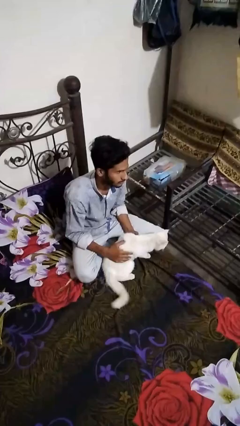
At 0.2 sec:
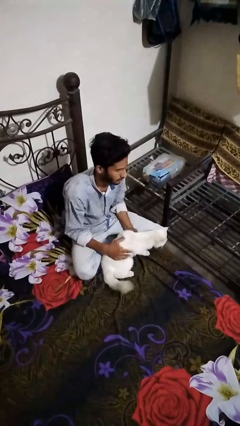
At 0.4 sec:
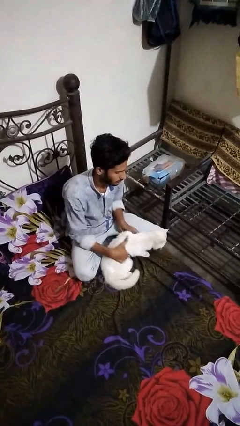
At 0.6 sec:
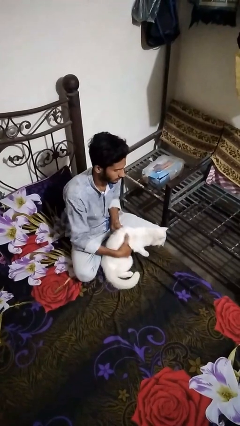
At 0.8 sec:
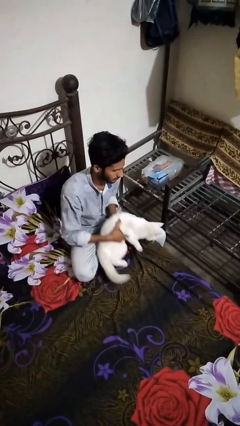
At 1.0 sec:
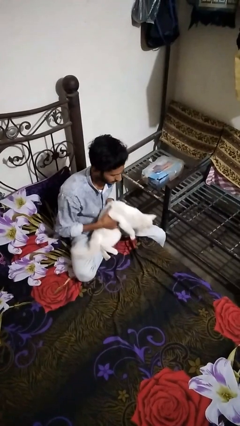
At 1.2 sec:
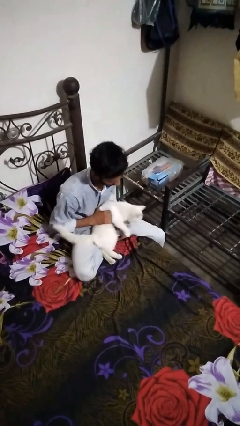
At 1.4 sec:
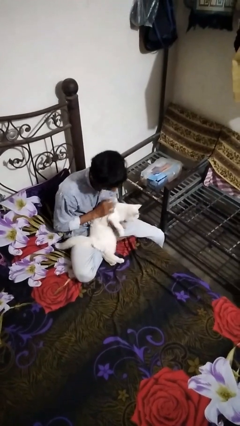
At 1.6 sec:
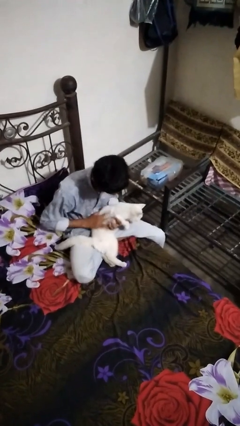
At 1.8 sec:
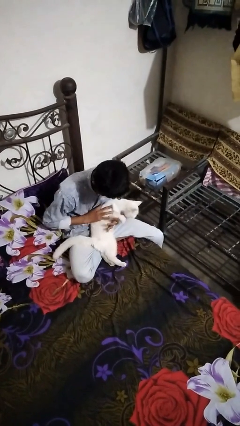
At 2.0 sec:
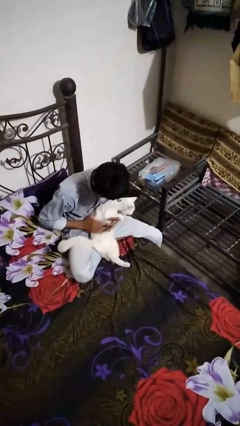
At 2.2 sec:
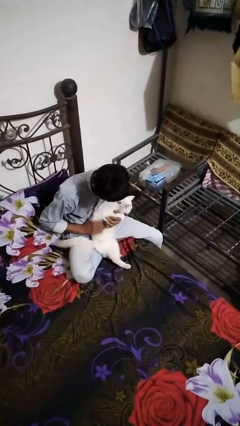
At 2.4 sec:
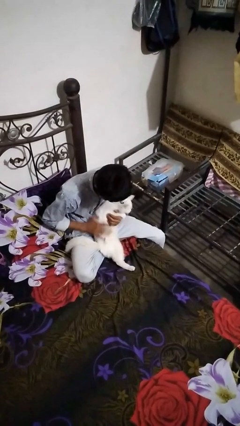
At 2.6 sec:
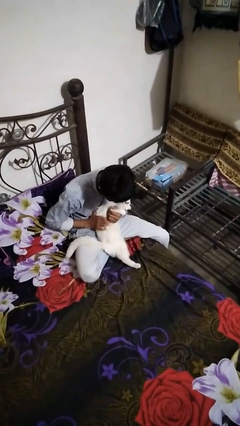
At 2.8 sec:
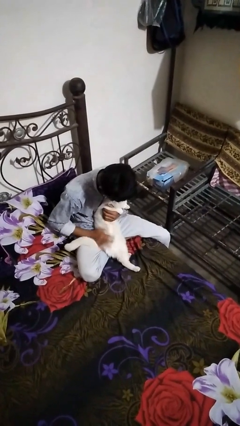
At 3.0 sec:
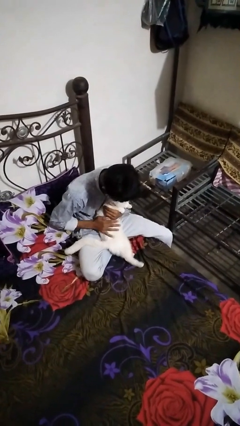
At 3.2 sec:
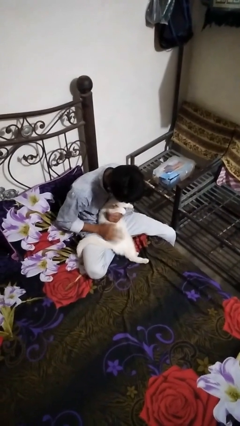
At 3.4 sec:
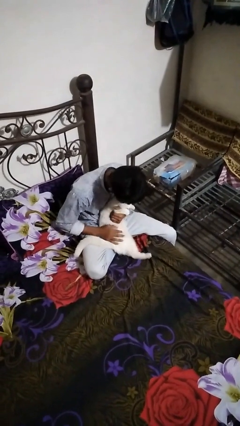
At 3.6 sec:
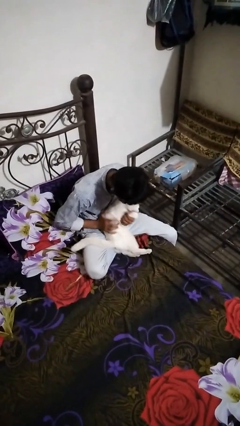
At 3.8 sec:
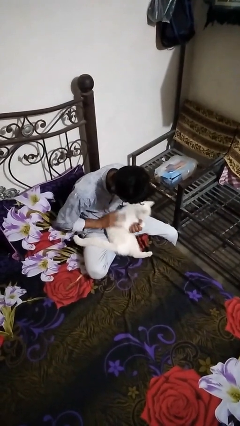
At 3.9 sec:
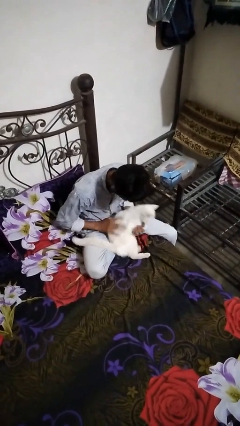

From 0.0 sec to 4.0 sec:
person pets cat

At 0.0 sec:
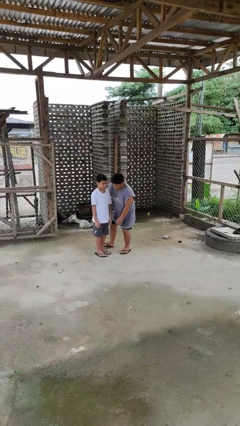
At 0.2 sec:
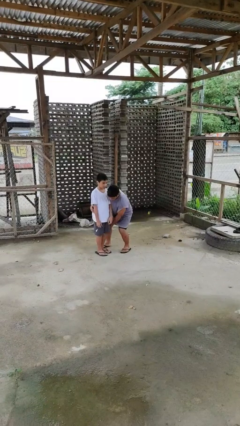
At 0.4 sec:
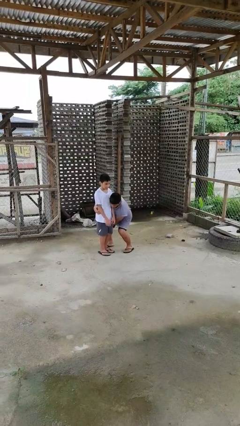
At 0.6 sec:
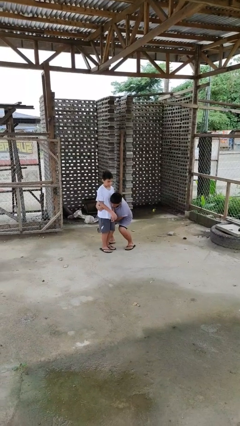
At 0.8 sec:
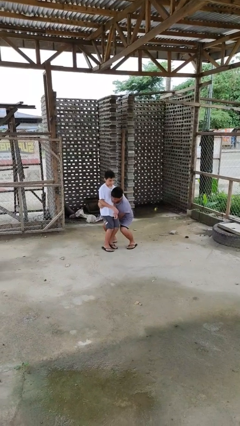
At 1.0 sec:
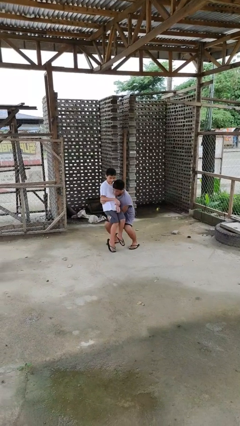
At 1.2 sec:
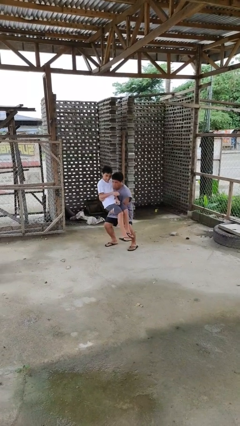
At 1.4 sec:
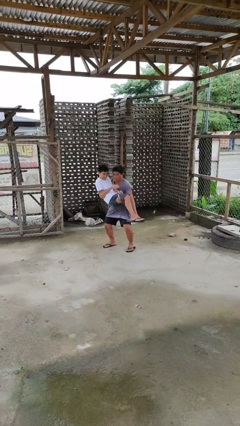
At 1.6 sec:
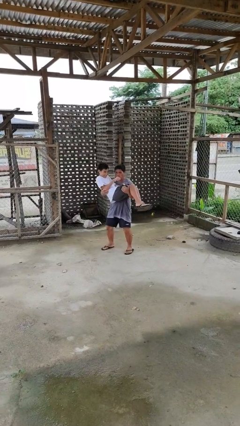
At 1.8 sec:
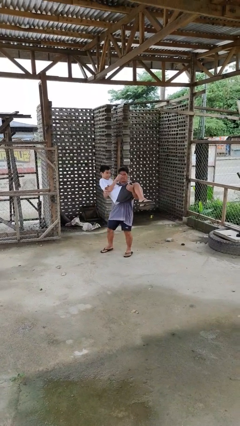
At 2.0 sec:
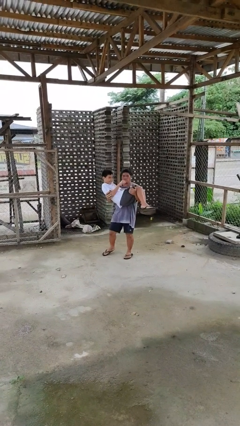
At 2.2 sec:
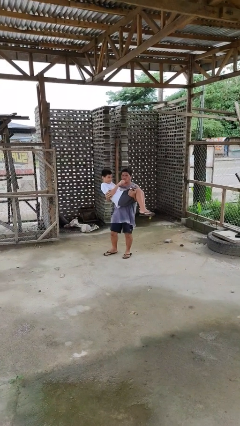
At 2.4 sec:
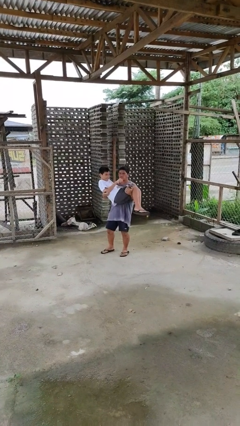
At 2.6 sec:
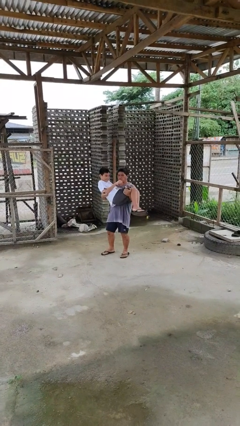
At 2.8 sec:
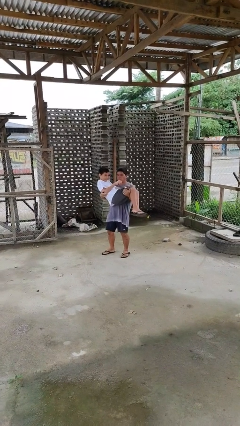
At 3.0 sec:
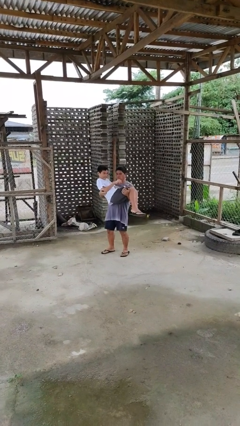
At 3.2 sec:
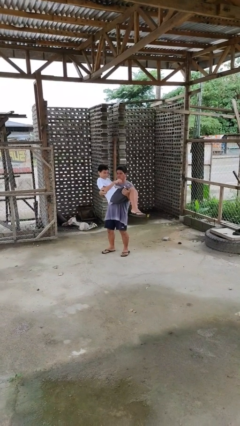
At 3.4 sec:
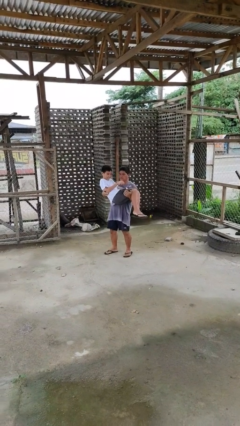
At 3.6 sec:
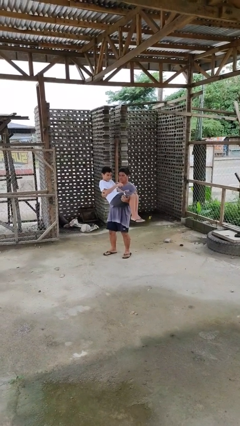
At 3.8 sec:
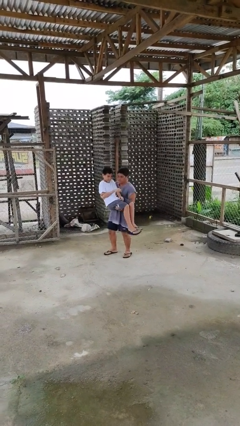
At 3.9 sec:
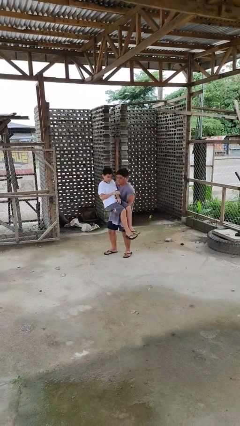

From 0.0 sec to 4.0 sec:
person picks up person

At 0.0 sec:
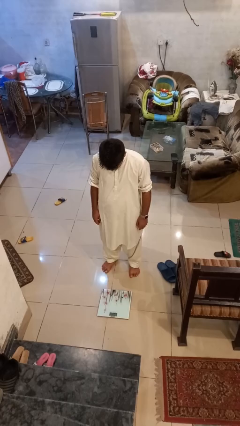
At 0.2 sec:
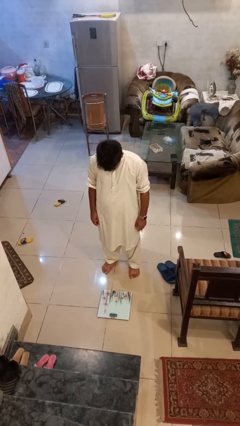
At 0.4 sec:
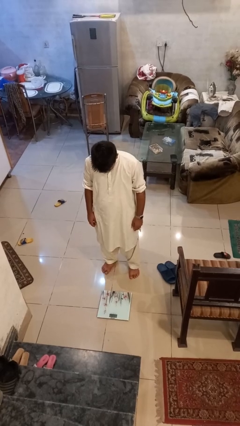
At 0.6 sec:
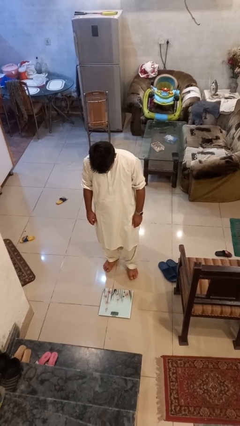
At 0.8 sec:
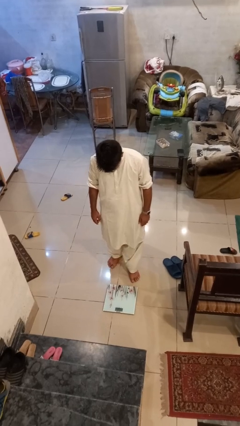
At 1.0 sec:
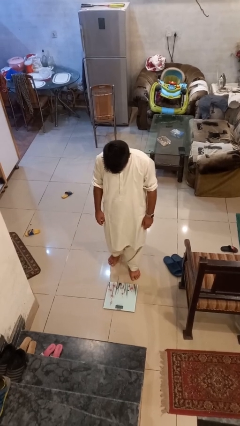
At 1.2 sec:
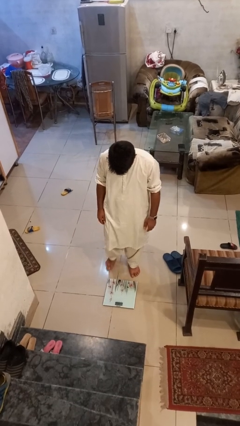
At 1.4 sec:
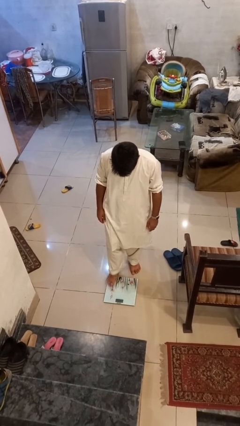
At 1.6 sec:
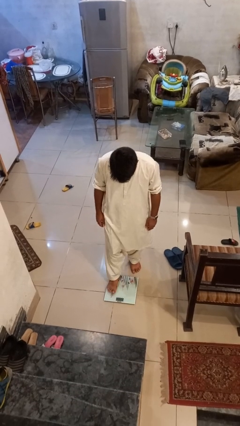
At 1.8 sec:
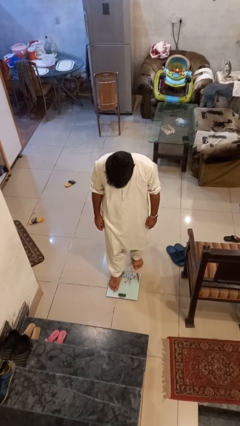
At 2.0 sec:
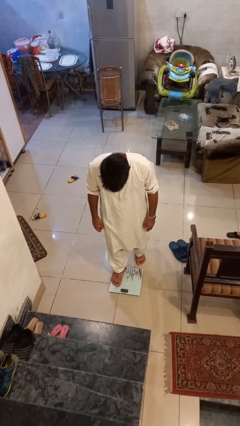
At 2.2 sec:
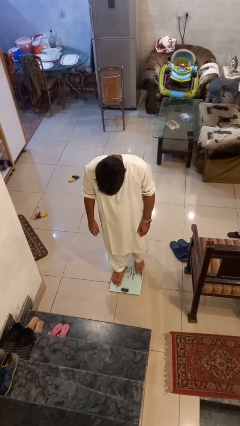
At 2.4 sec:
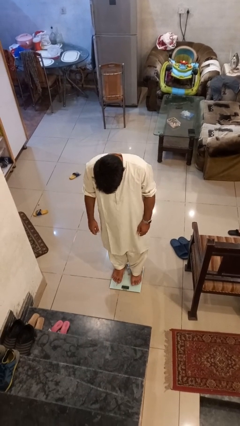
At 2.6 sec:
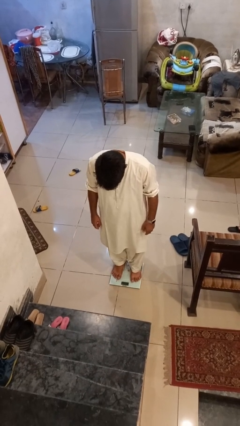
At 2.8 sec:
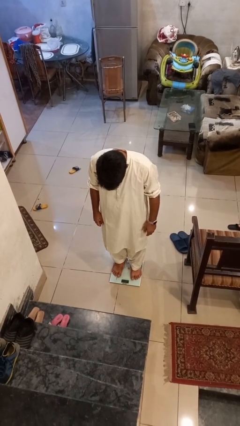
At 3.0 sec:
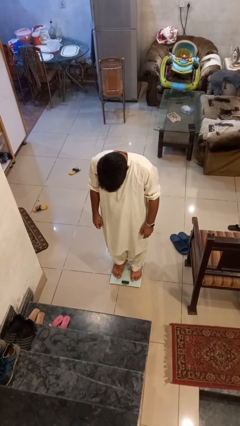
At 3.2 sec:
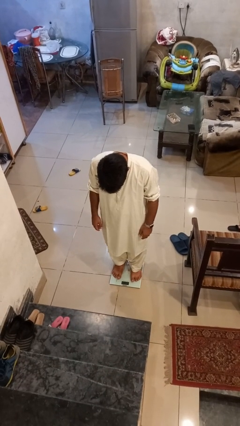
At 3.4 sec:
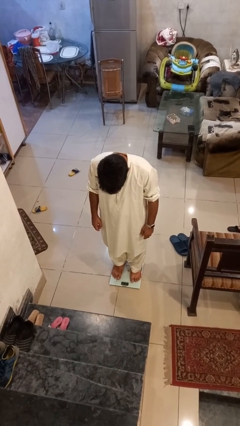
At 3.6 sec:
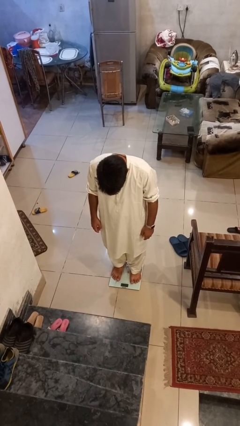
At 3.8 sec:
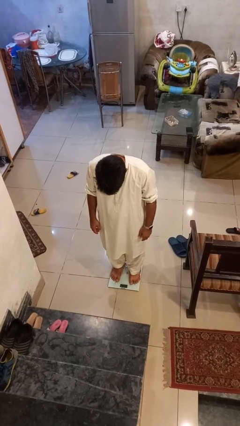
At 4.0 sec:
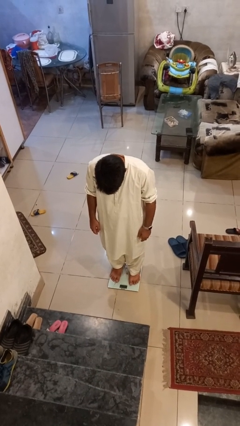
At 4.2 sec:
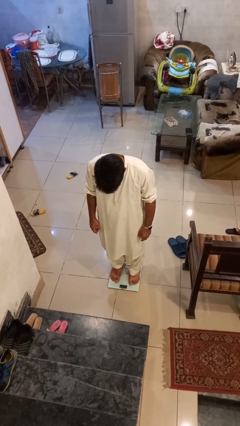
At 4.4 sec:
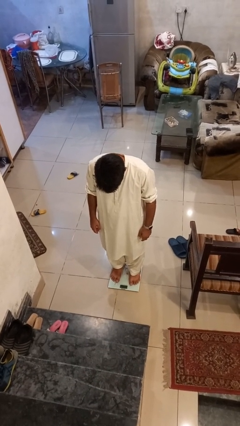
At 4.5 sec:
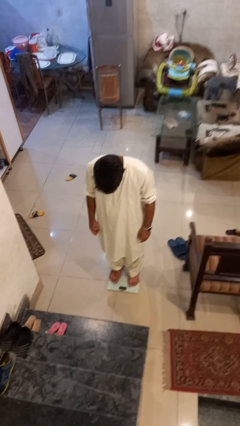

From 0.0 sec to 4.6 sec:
person uses bodyweight scale

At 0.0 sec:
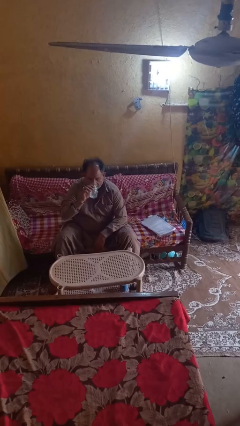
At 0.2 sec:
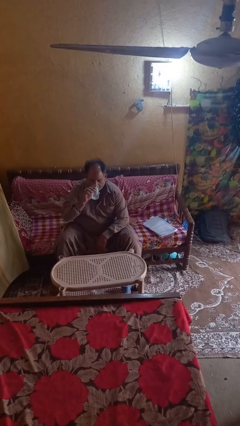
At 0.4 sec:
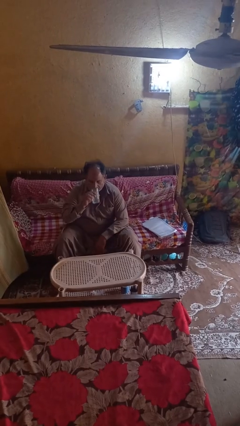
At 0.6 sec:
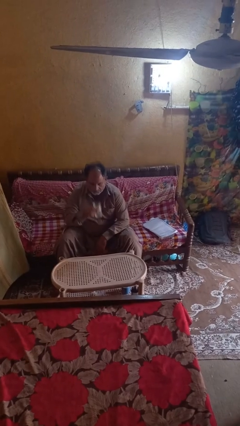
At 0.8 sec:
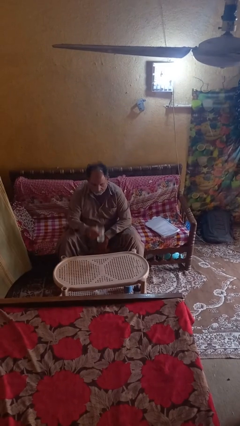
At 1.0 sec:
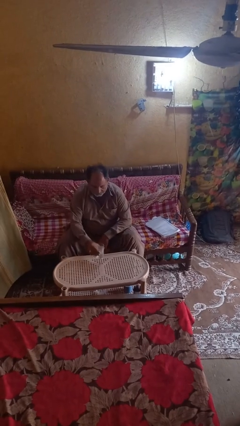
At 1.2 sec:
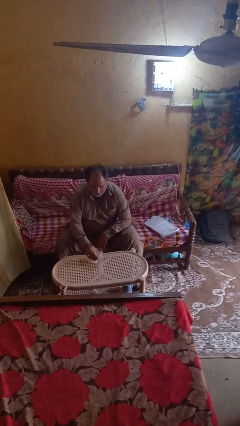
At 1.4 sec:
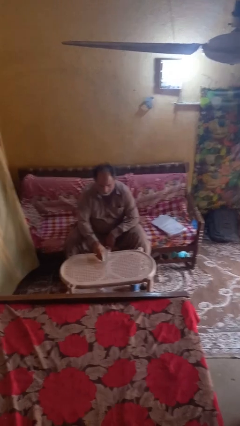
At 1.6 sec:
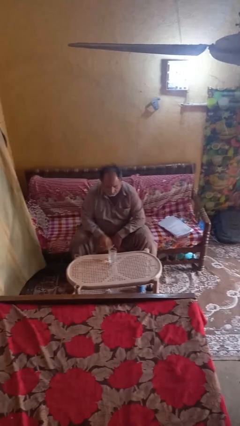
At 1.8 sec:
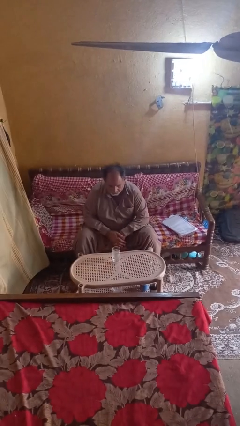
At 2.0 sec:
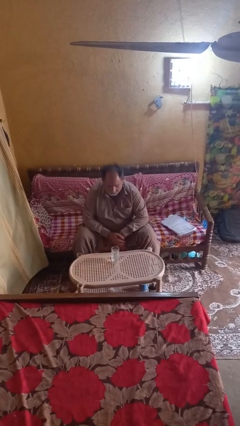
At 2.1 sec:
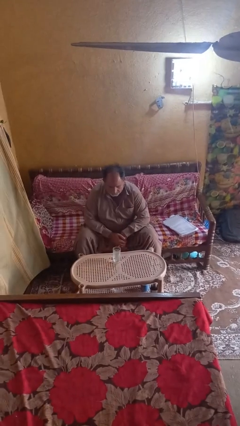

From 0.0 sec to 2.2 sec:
person puts down object on table

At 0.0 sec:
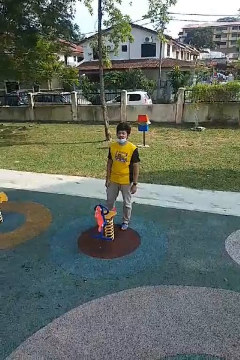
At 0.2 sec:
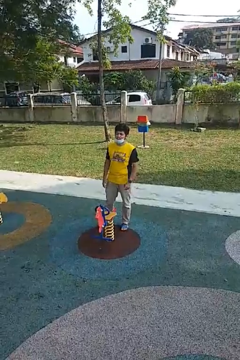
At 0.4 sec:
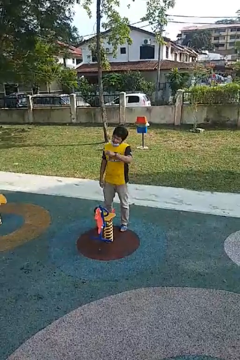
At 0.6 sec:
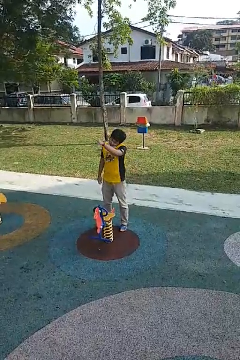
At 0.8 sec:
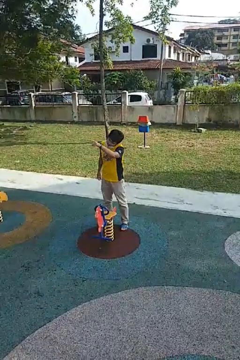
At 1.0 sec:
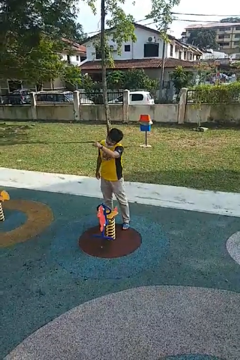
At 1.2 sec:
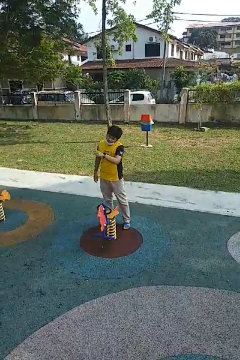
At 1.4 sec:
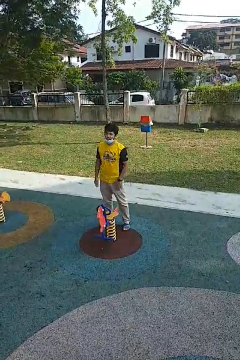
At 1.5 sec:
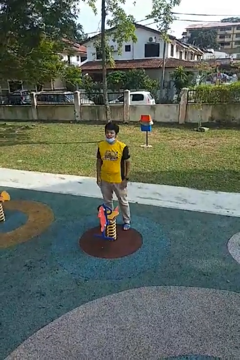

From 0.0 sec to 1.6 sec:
person points at person

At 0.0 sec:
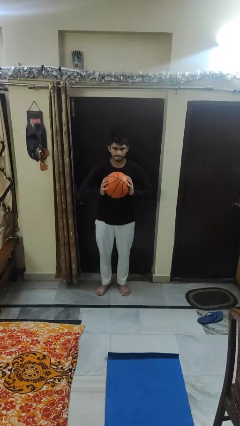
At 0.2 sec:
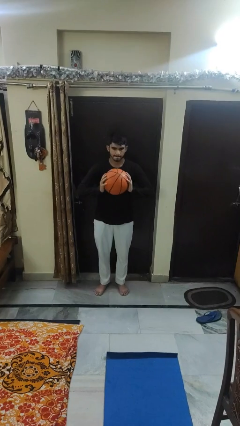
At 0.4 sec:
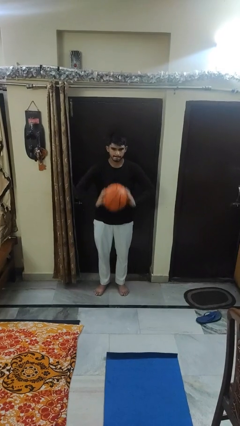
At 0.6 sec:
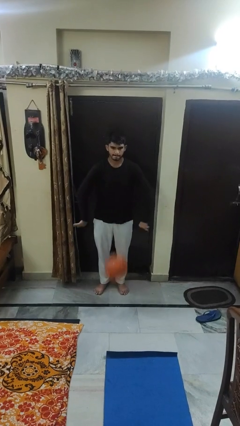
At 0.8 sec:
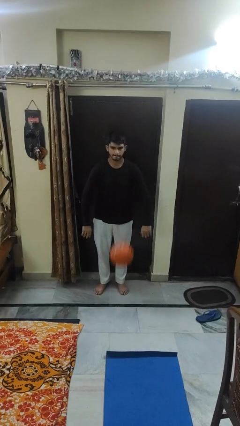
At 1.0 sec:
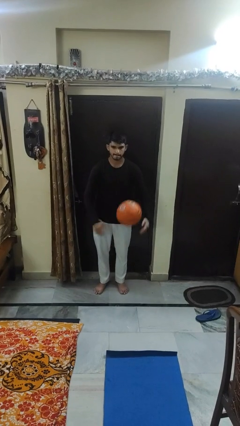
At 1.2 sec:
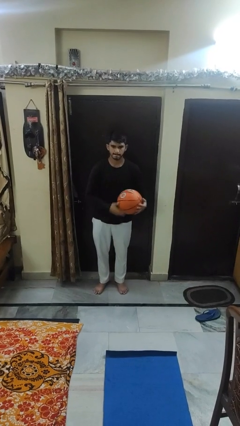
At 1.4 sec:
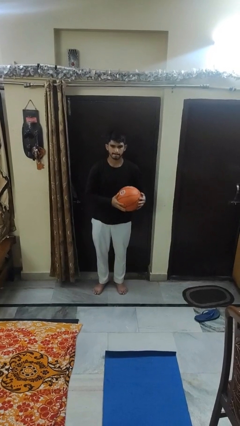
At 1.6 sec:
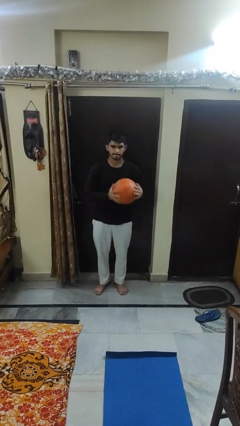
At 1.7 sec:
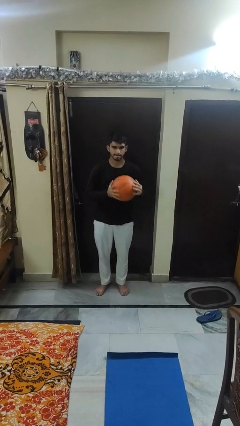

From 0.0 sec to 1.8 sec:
person bounces ball on floor
